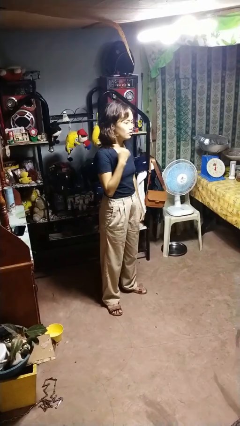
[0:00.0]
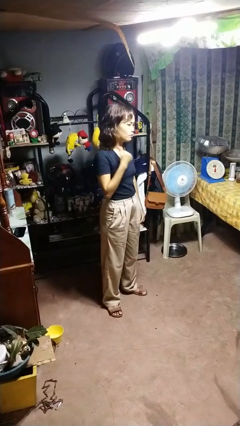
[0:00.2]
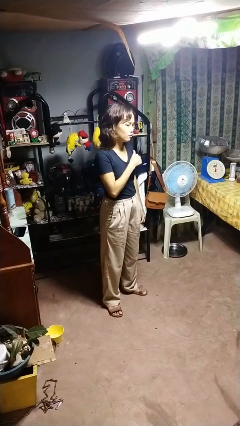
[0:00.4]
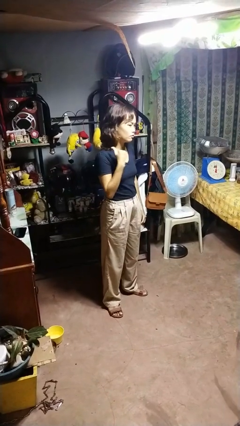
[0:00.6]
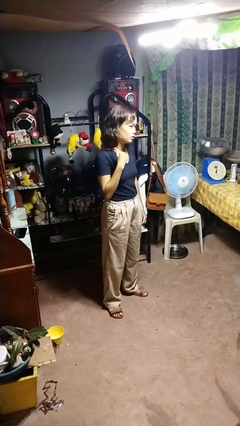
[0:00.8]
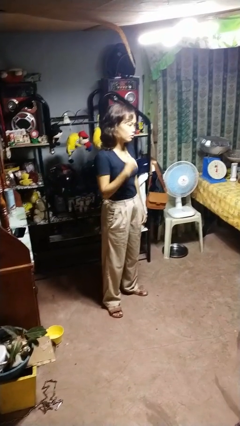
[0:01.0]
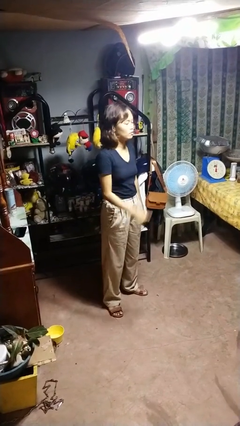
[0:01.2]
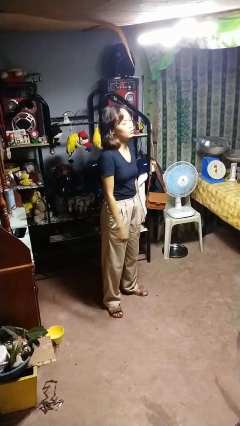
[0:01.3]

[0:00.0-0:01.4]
person gestures cut

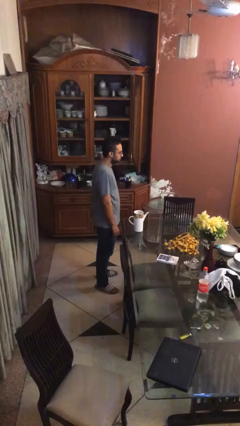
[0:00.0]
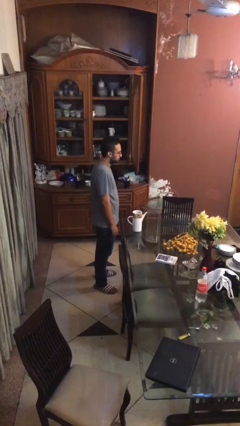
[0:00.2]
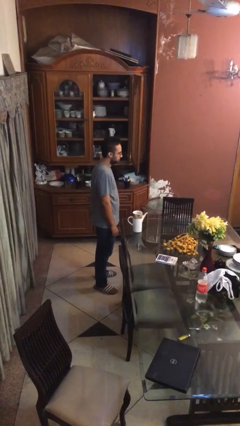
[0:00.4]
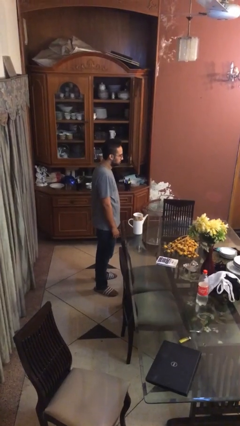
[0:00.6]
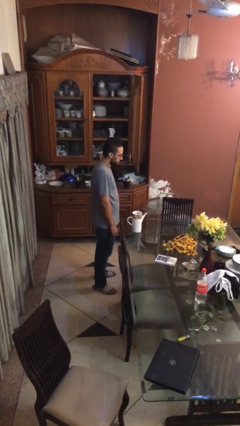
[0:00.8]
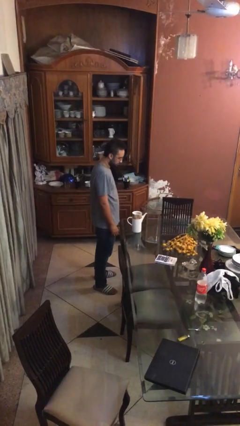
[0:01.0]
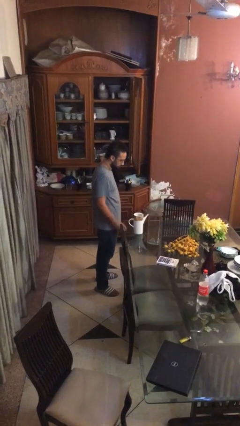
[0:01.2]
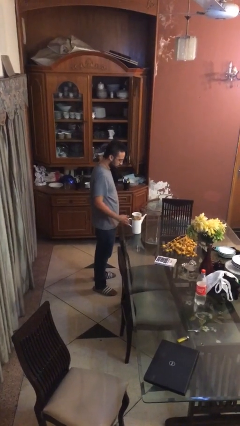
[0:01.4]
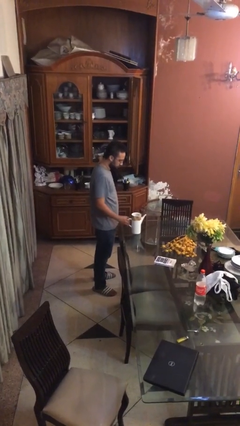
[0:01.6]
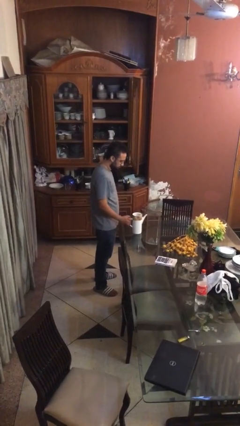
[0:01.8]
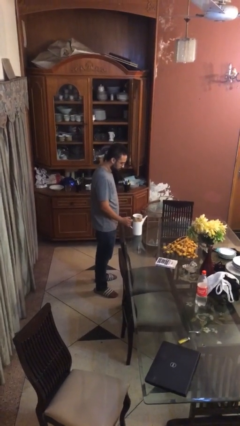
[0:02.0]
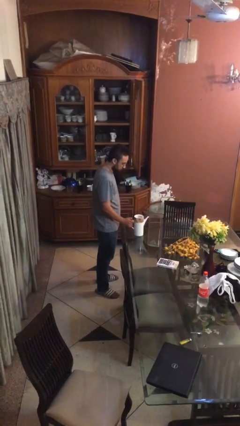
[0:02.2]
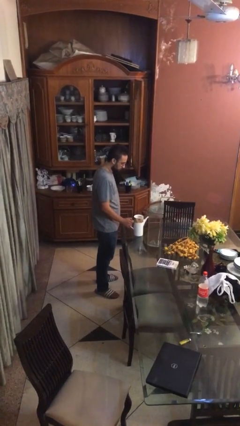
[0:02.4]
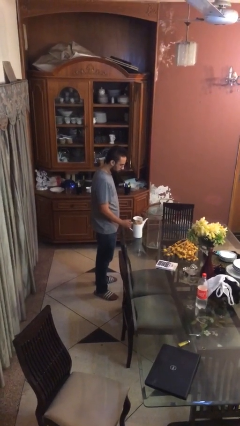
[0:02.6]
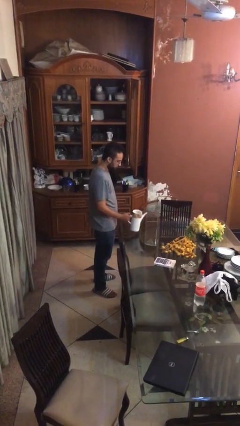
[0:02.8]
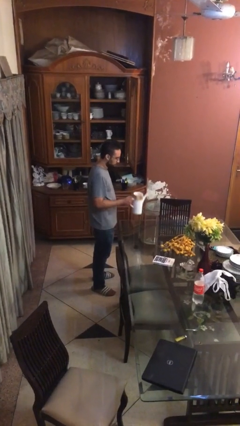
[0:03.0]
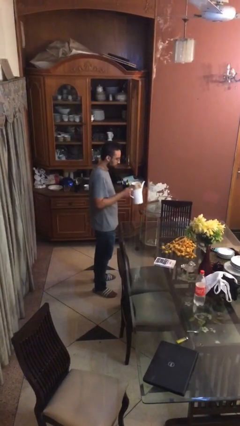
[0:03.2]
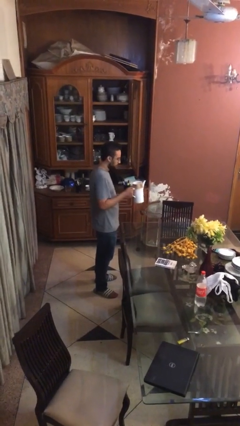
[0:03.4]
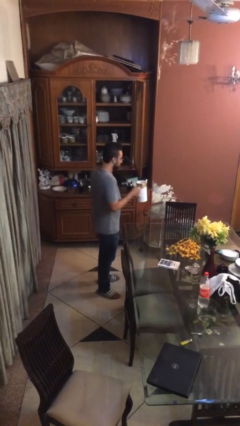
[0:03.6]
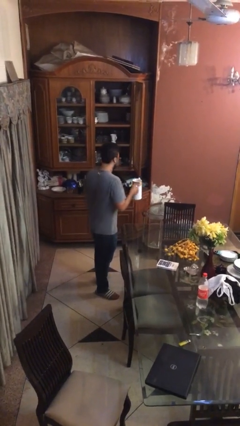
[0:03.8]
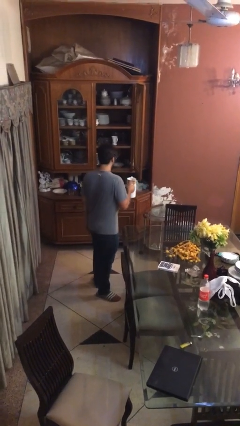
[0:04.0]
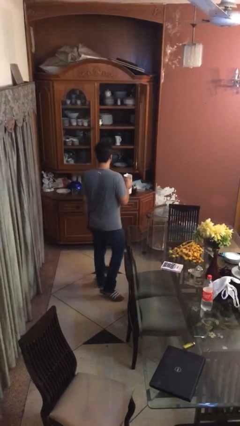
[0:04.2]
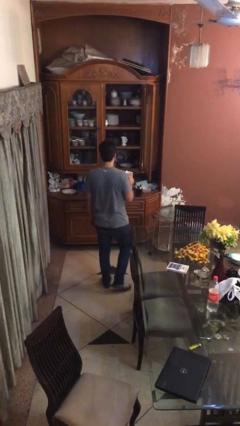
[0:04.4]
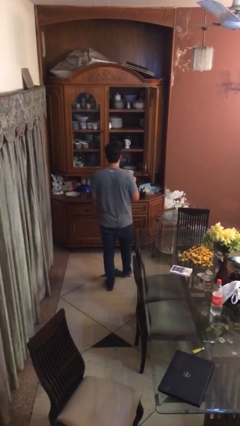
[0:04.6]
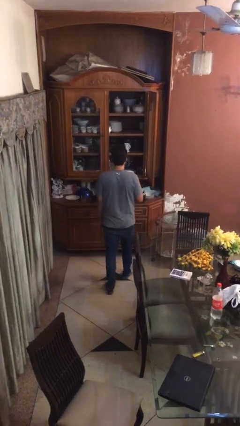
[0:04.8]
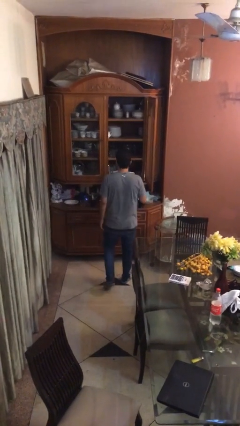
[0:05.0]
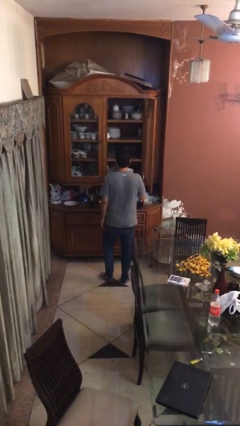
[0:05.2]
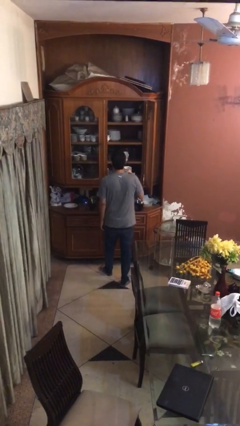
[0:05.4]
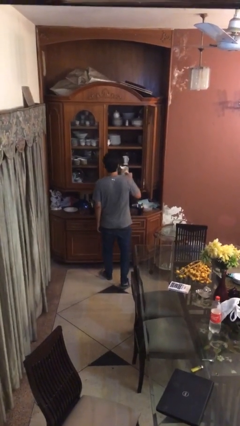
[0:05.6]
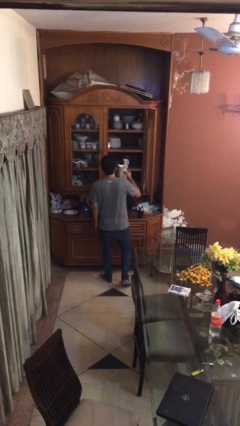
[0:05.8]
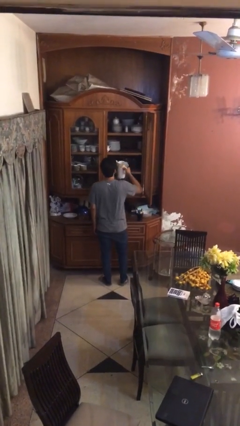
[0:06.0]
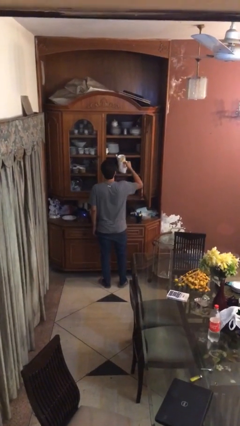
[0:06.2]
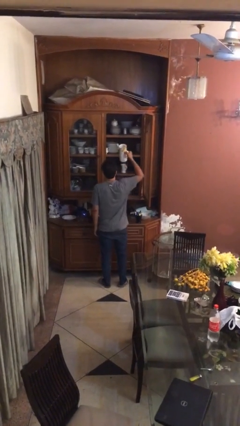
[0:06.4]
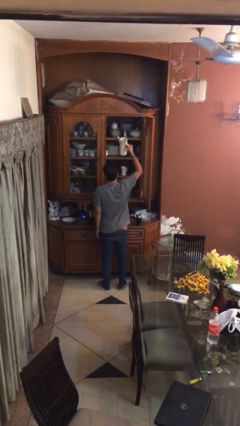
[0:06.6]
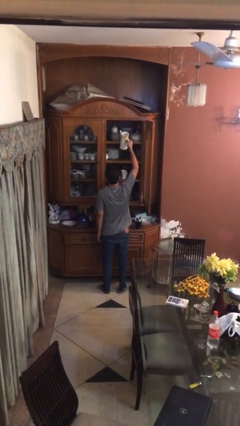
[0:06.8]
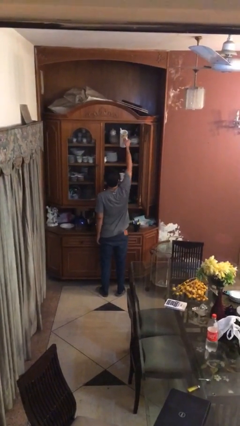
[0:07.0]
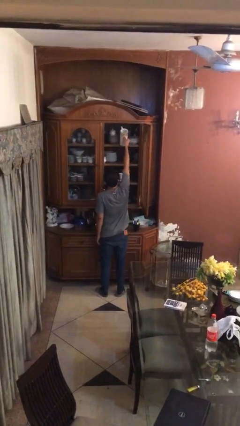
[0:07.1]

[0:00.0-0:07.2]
person picks up object from table

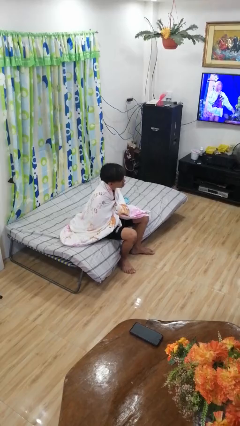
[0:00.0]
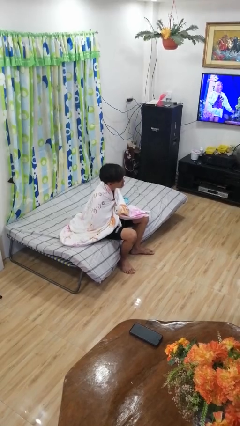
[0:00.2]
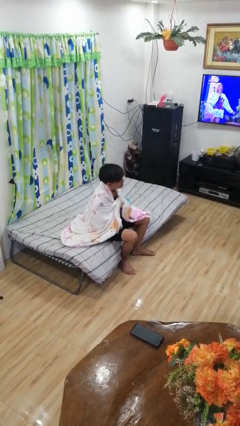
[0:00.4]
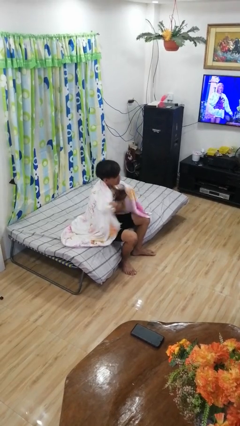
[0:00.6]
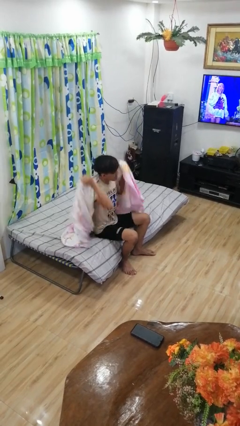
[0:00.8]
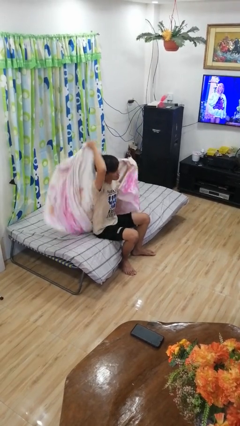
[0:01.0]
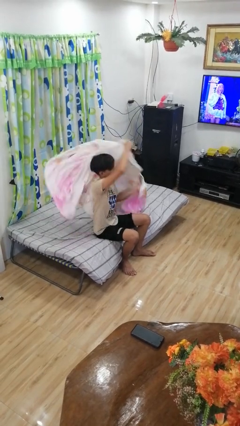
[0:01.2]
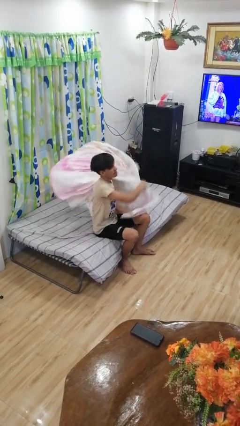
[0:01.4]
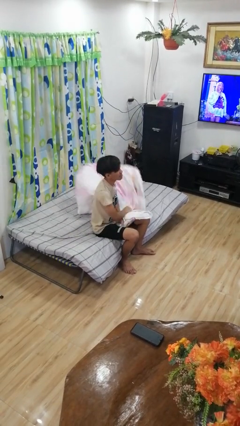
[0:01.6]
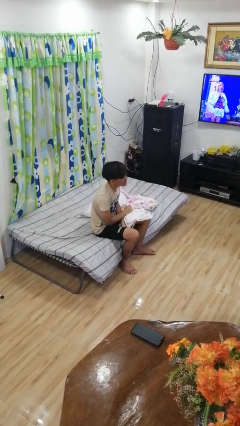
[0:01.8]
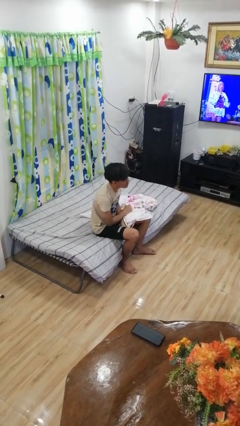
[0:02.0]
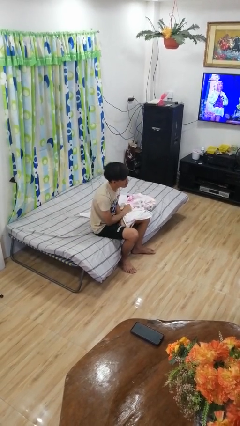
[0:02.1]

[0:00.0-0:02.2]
person uncovers with blanket

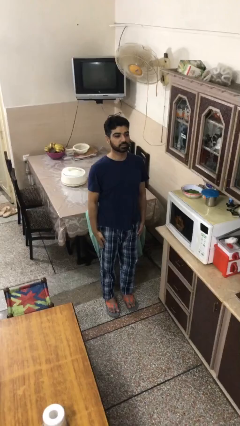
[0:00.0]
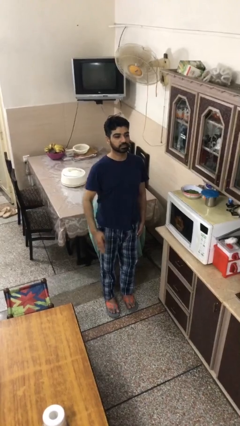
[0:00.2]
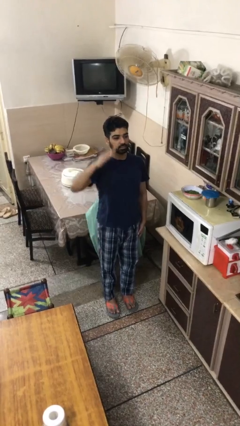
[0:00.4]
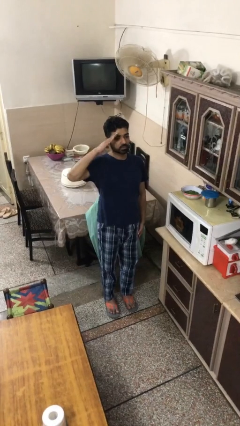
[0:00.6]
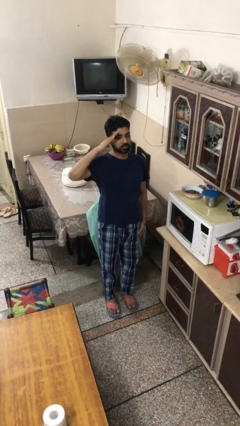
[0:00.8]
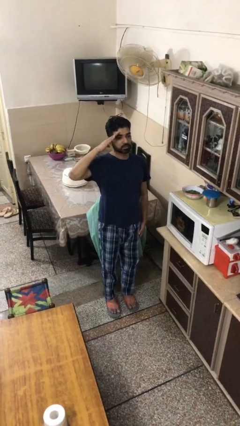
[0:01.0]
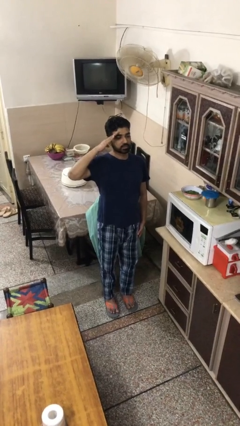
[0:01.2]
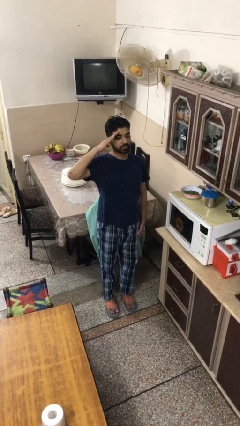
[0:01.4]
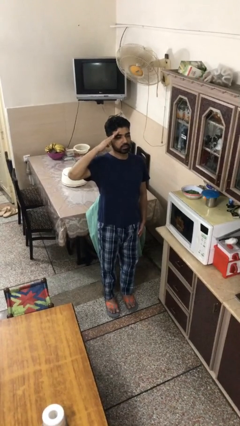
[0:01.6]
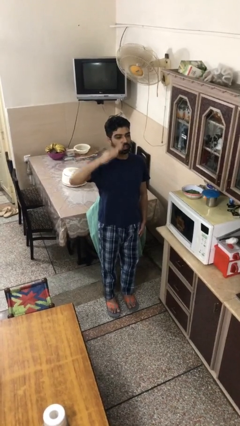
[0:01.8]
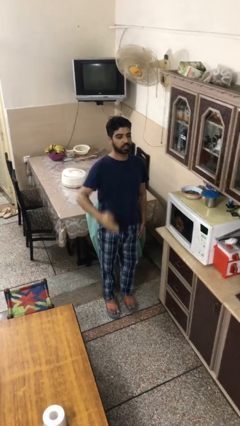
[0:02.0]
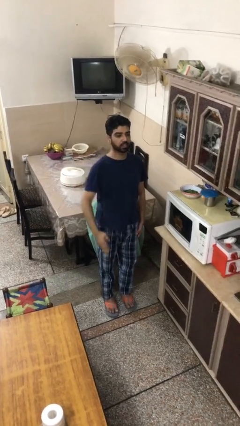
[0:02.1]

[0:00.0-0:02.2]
person salutes

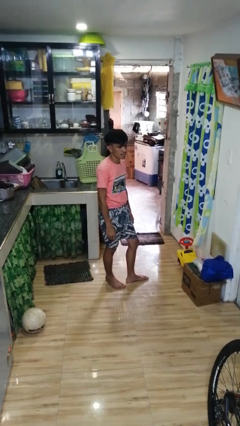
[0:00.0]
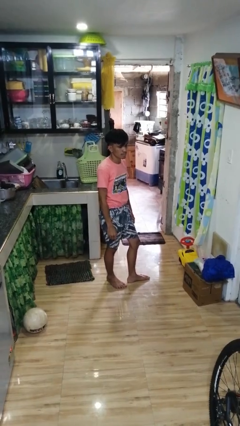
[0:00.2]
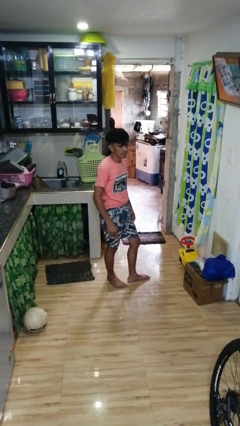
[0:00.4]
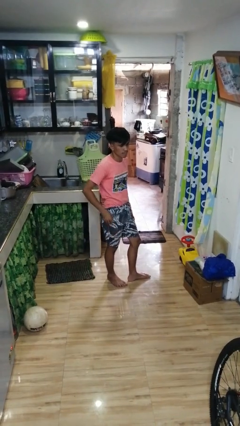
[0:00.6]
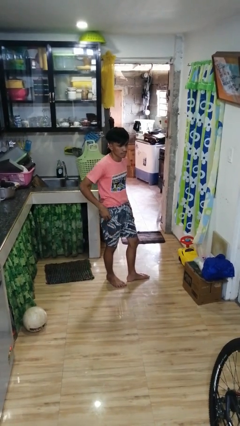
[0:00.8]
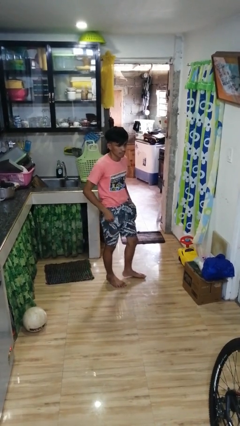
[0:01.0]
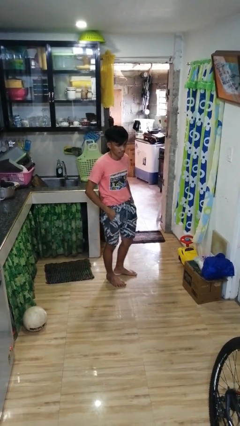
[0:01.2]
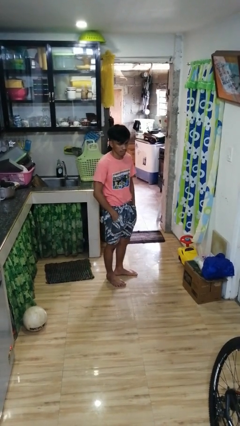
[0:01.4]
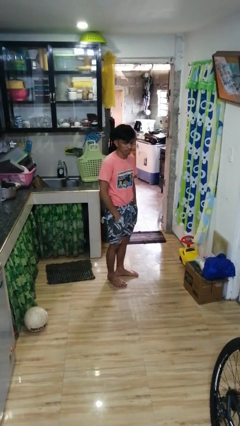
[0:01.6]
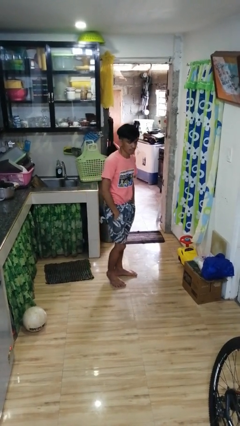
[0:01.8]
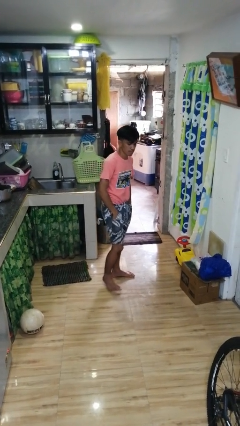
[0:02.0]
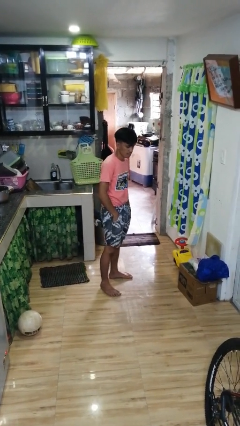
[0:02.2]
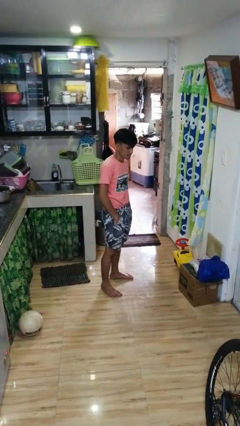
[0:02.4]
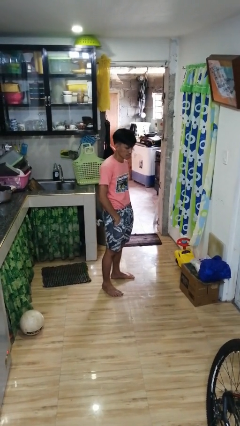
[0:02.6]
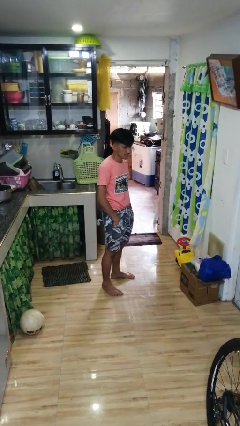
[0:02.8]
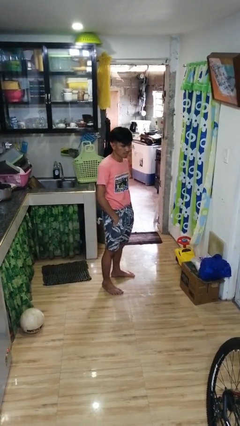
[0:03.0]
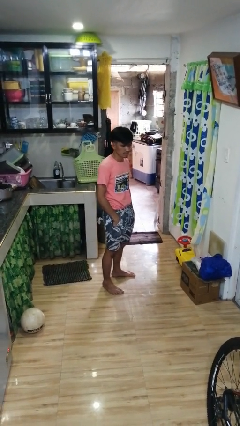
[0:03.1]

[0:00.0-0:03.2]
person puts hands in back pockets

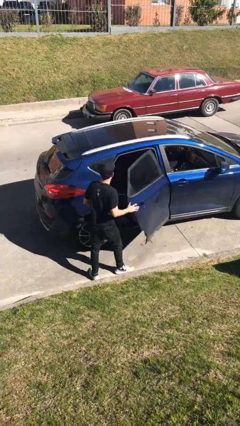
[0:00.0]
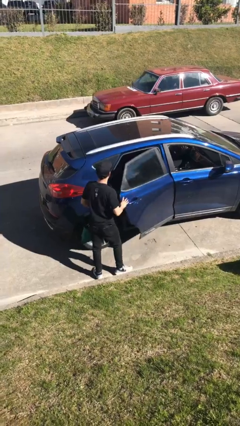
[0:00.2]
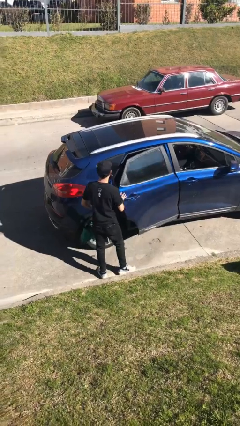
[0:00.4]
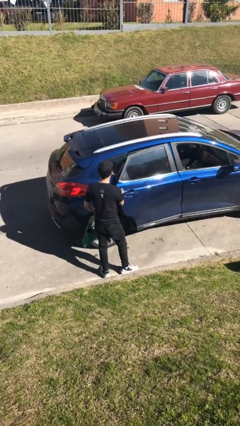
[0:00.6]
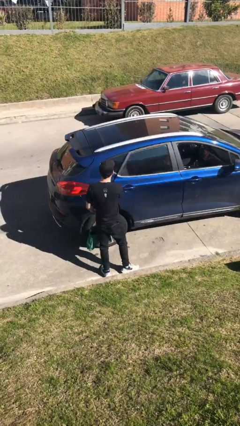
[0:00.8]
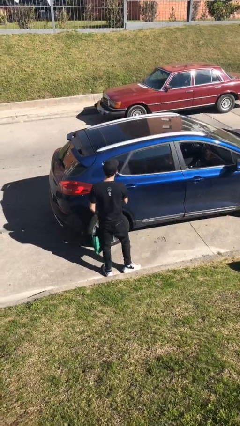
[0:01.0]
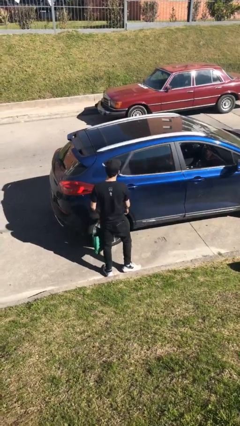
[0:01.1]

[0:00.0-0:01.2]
person closes car door
